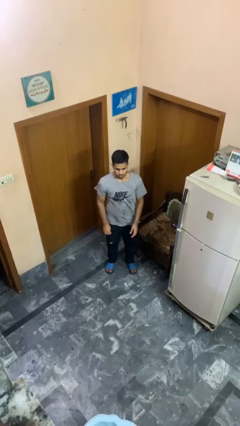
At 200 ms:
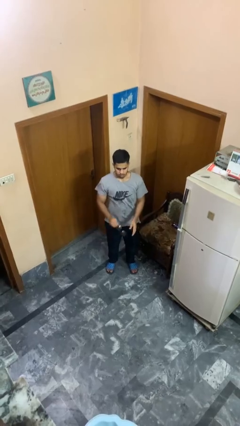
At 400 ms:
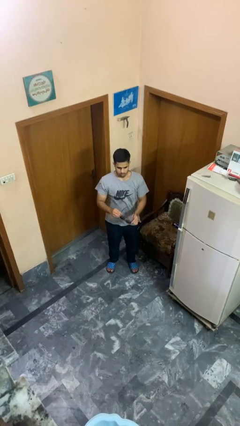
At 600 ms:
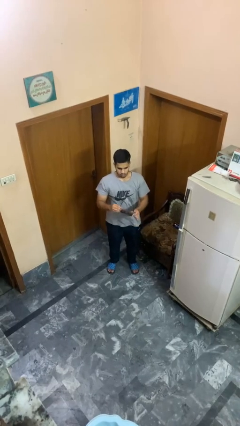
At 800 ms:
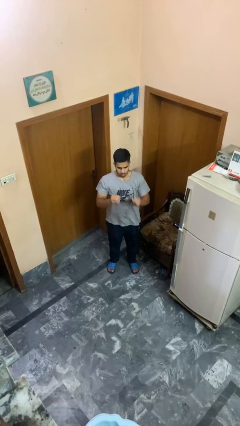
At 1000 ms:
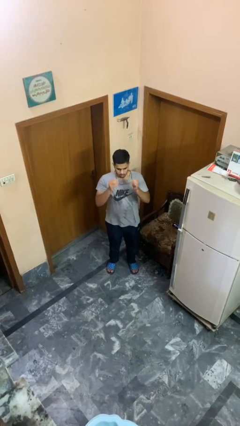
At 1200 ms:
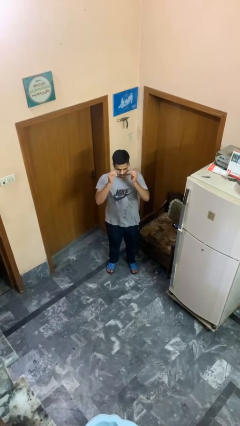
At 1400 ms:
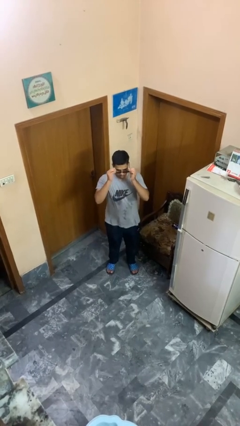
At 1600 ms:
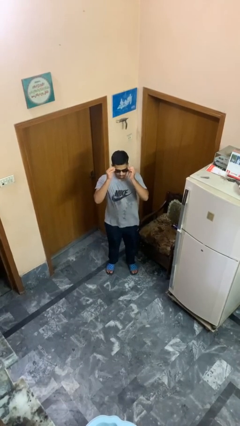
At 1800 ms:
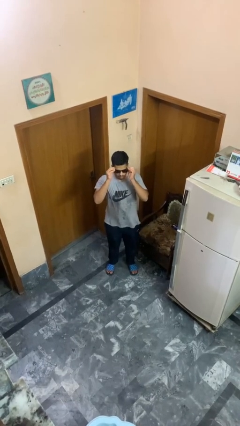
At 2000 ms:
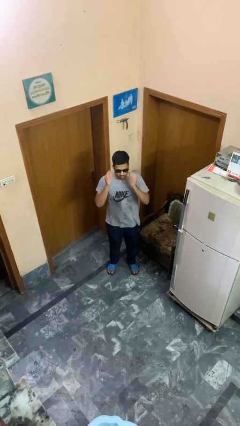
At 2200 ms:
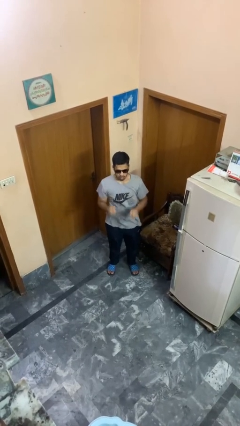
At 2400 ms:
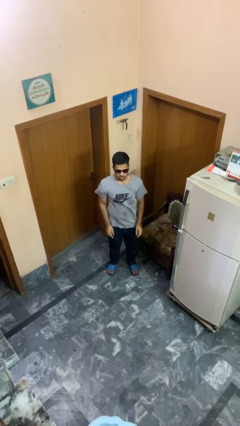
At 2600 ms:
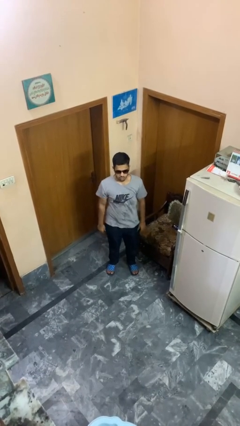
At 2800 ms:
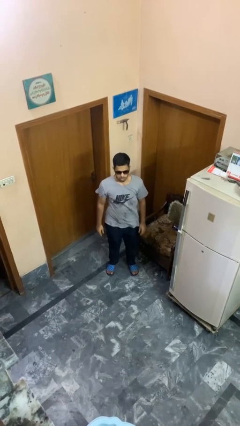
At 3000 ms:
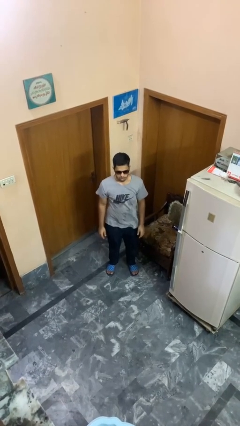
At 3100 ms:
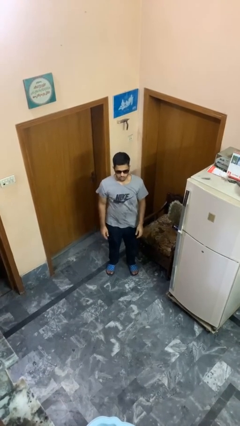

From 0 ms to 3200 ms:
person puts on sunglasses

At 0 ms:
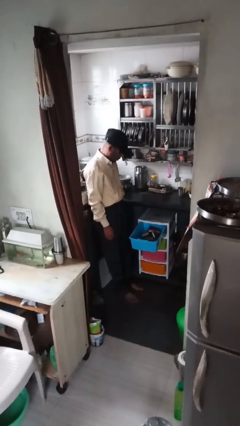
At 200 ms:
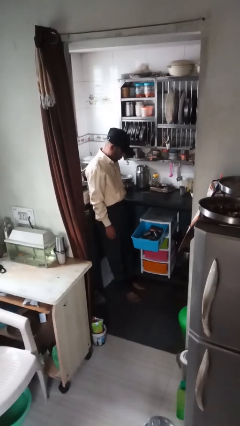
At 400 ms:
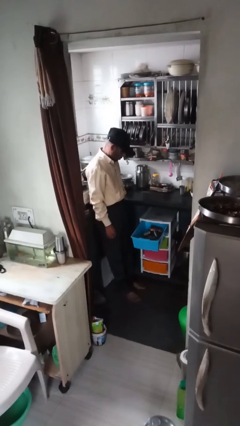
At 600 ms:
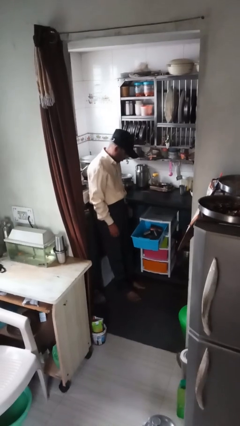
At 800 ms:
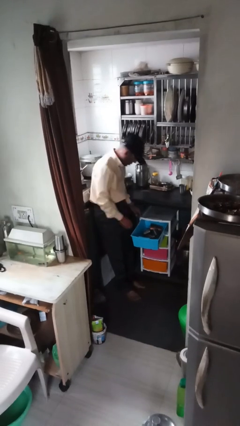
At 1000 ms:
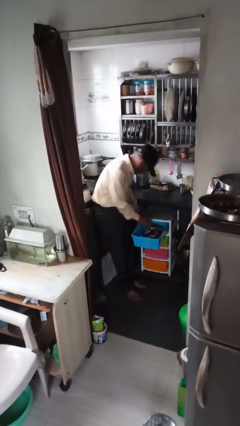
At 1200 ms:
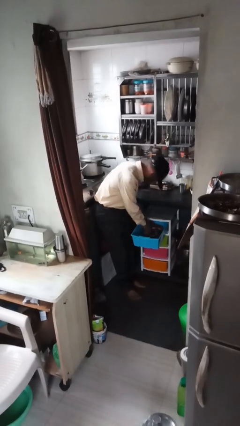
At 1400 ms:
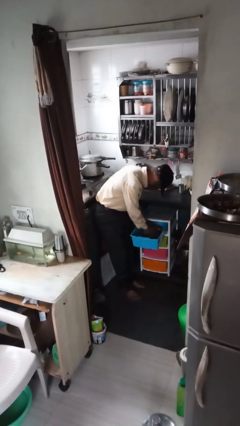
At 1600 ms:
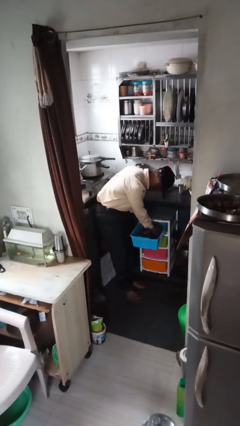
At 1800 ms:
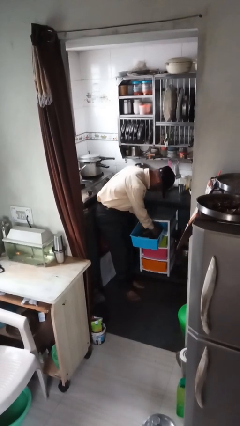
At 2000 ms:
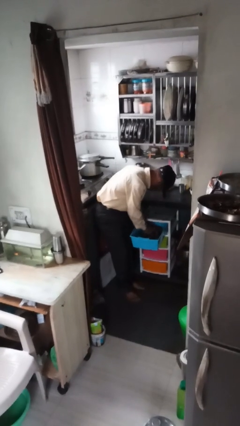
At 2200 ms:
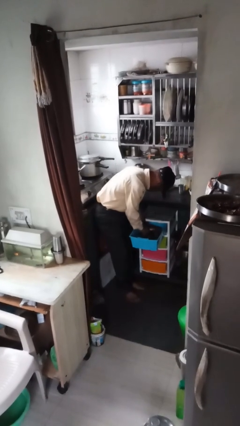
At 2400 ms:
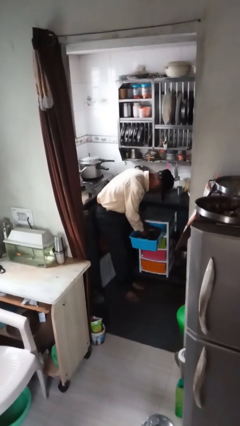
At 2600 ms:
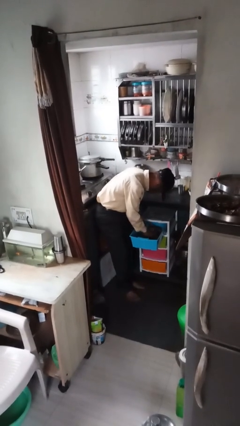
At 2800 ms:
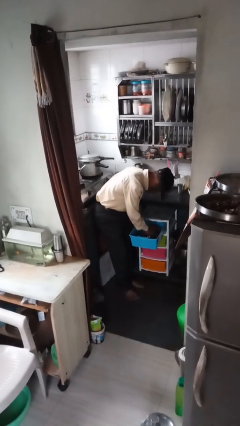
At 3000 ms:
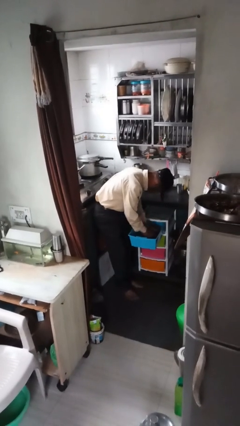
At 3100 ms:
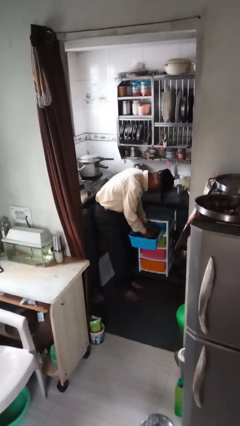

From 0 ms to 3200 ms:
person searches in kitchen drawer

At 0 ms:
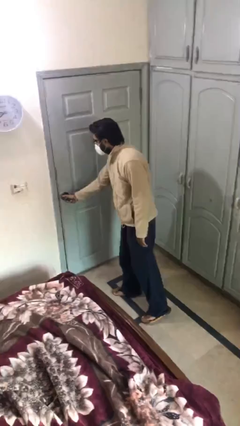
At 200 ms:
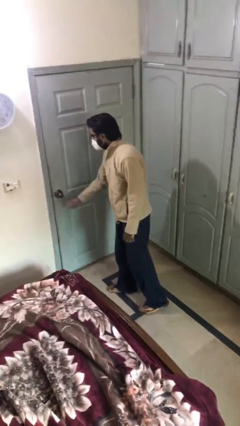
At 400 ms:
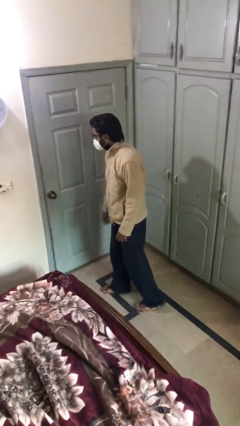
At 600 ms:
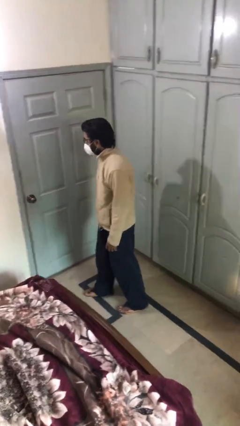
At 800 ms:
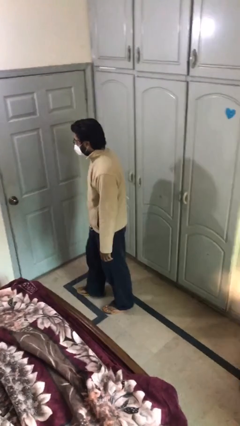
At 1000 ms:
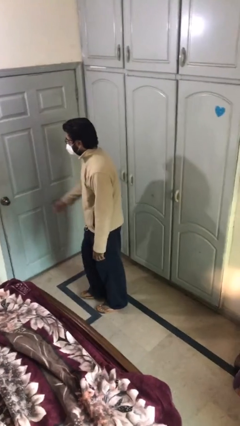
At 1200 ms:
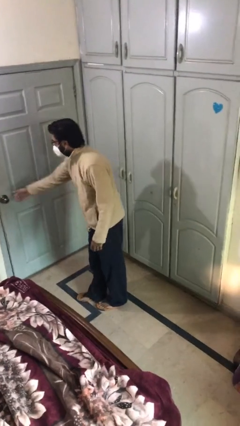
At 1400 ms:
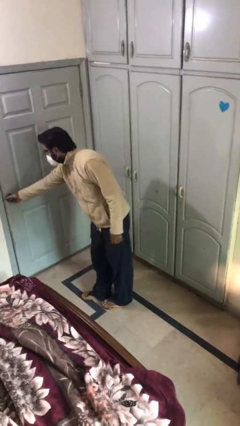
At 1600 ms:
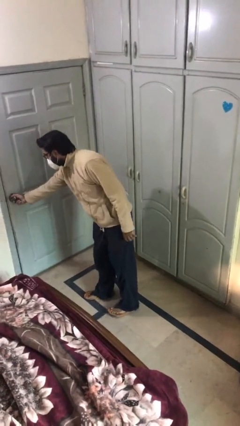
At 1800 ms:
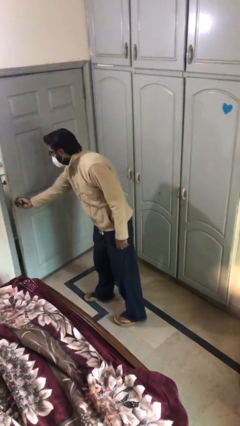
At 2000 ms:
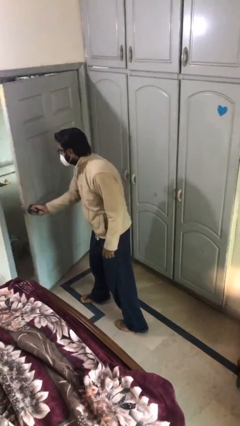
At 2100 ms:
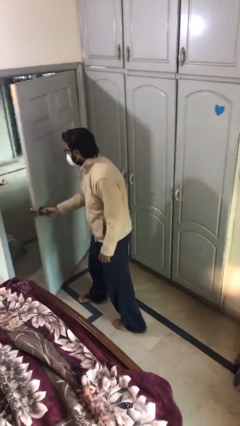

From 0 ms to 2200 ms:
person opens facility door

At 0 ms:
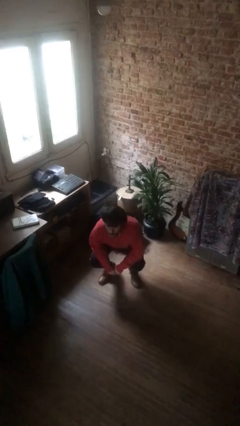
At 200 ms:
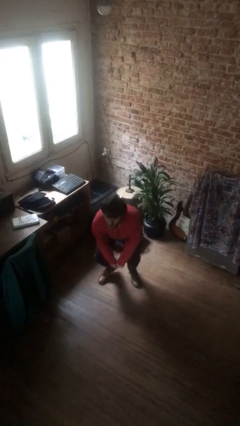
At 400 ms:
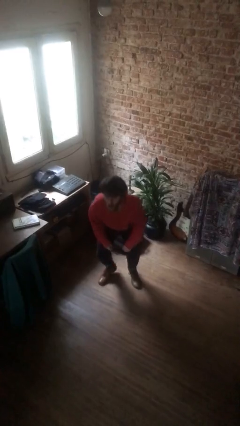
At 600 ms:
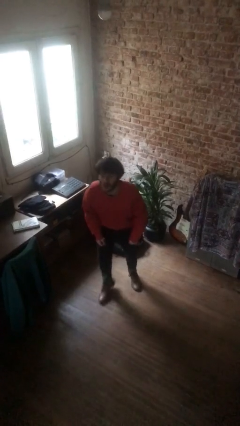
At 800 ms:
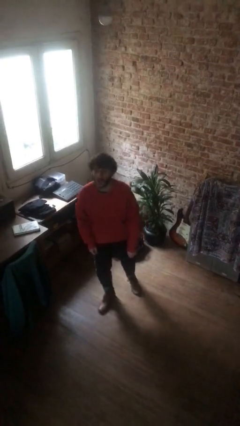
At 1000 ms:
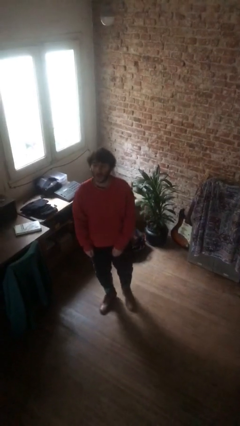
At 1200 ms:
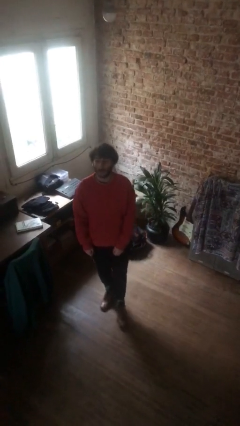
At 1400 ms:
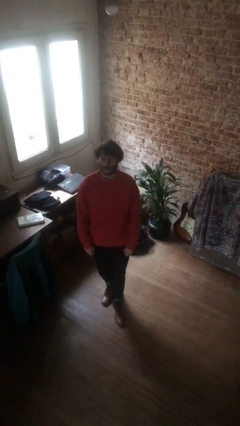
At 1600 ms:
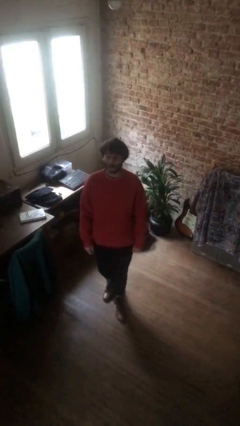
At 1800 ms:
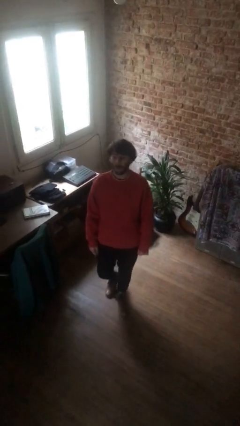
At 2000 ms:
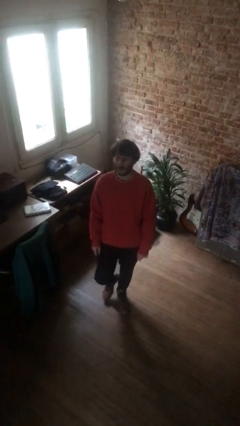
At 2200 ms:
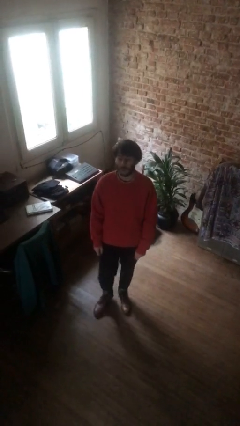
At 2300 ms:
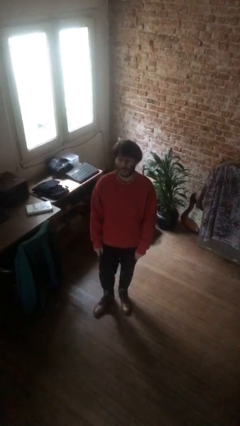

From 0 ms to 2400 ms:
person stands up

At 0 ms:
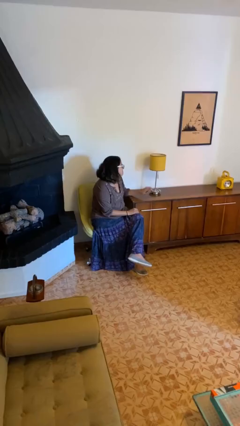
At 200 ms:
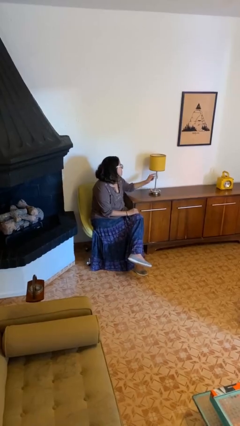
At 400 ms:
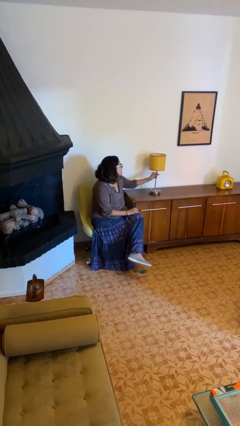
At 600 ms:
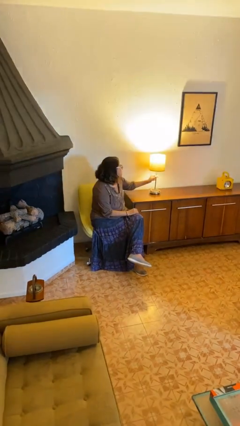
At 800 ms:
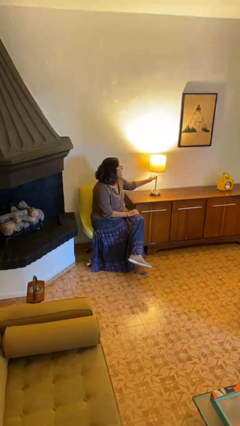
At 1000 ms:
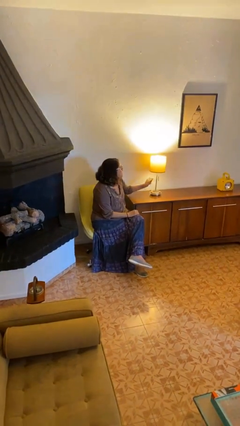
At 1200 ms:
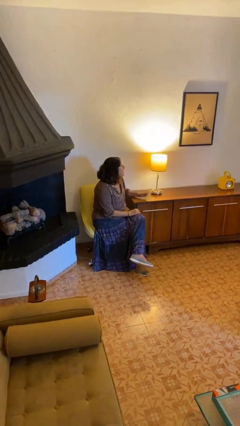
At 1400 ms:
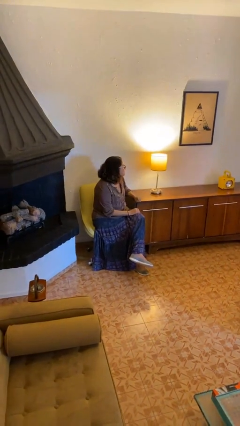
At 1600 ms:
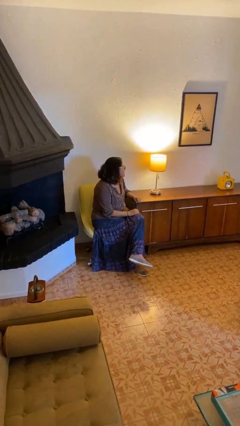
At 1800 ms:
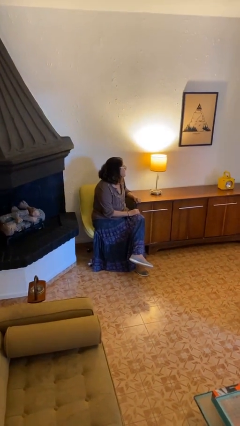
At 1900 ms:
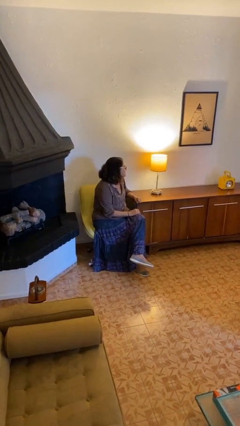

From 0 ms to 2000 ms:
person turns on lamp

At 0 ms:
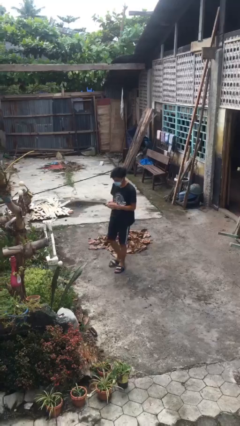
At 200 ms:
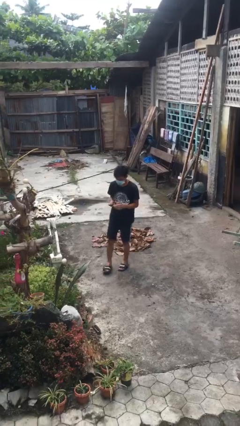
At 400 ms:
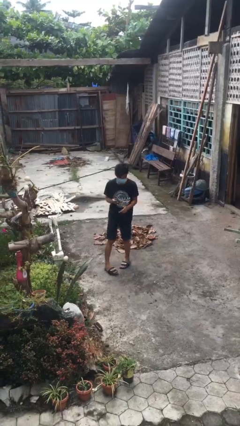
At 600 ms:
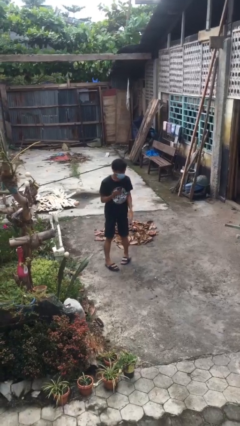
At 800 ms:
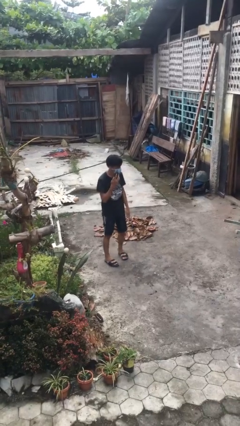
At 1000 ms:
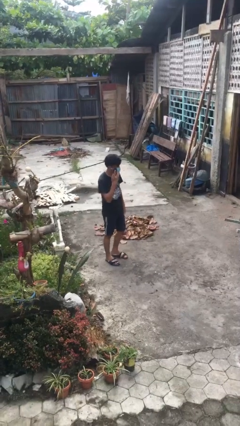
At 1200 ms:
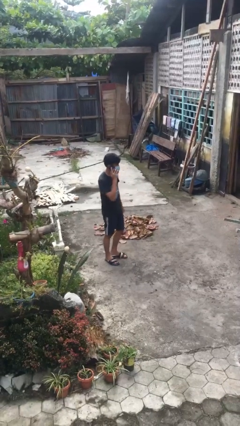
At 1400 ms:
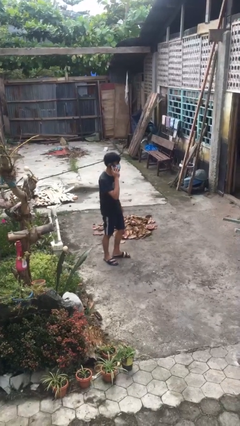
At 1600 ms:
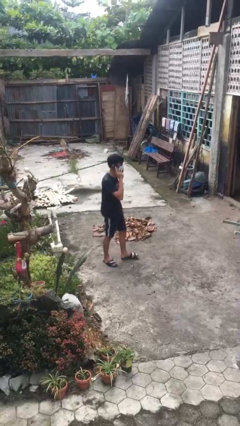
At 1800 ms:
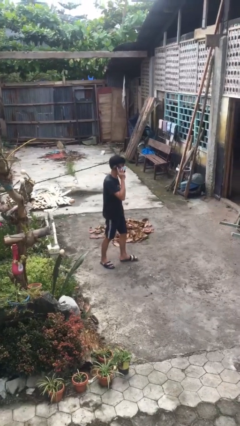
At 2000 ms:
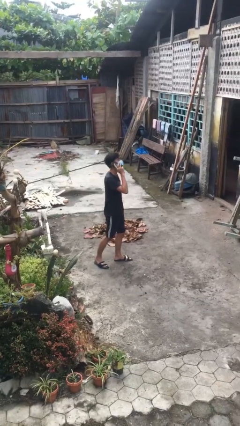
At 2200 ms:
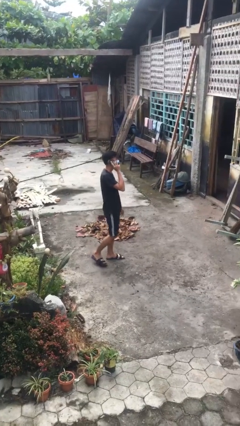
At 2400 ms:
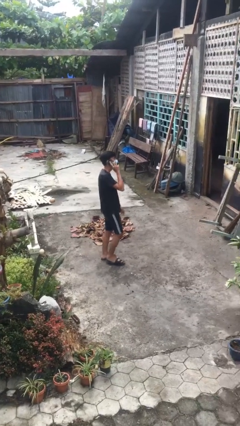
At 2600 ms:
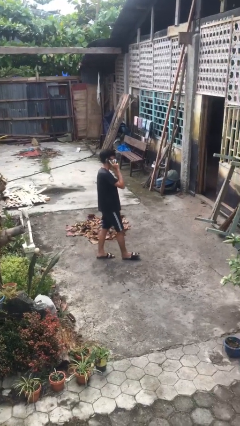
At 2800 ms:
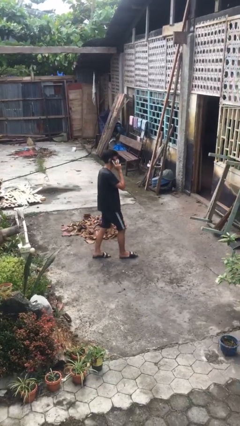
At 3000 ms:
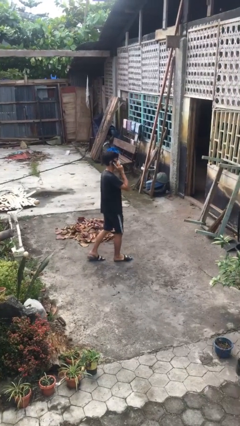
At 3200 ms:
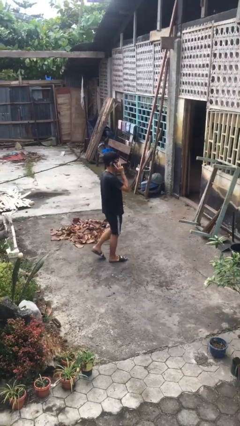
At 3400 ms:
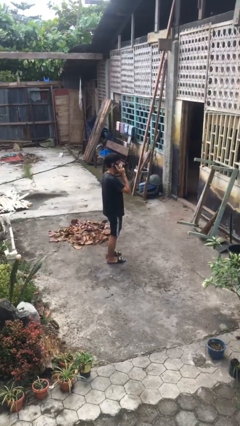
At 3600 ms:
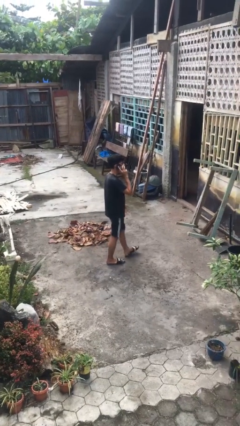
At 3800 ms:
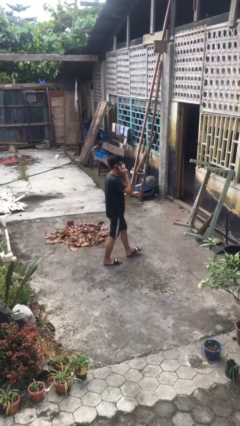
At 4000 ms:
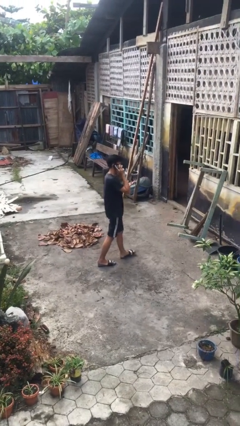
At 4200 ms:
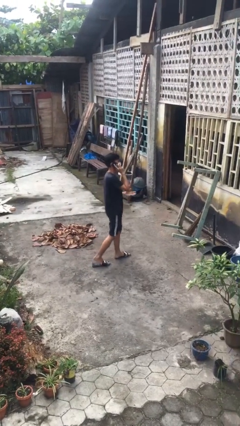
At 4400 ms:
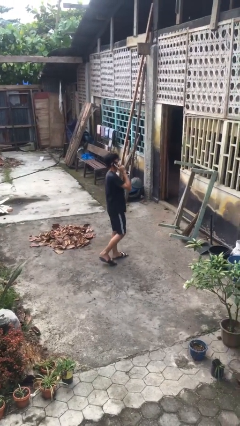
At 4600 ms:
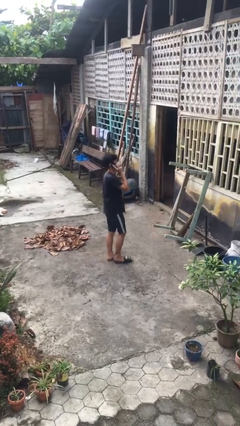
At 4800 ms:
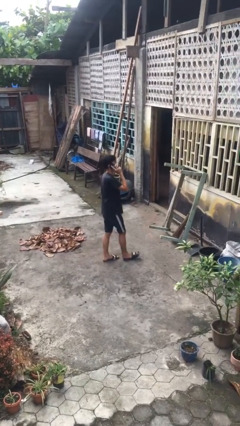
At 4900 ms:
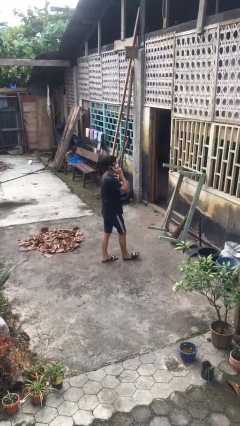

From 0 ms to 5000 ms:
person talks on phone
